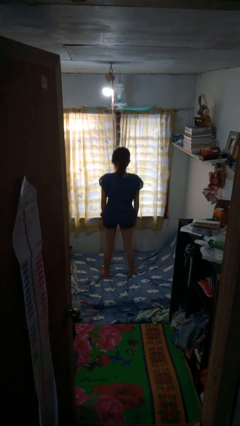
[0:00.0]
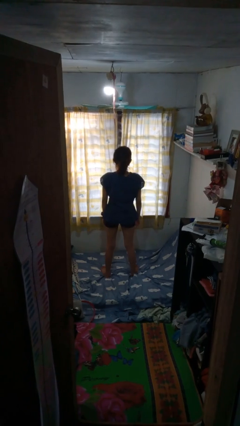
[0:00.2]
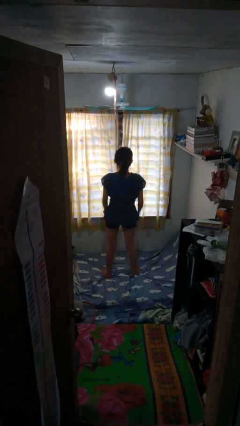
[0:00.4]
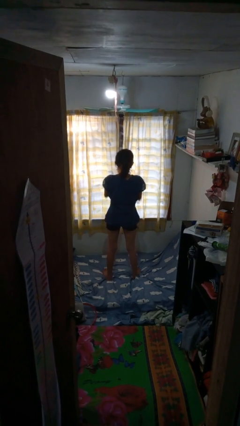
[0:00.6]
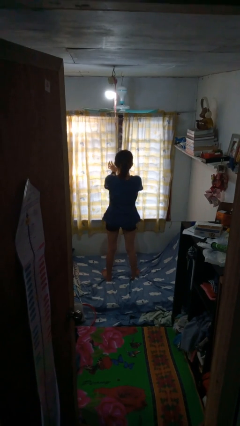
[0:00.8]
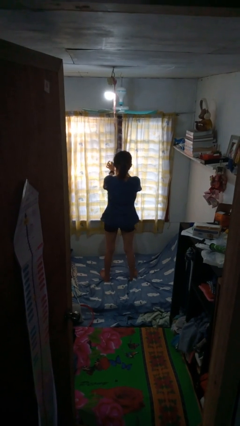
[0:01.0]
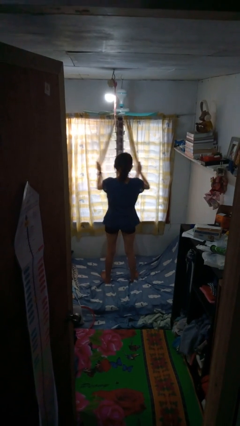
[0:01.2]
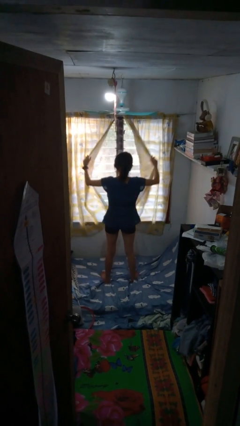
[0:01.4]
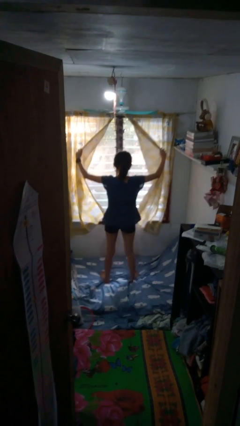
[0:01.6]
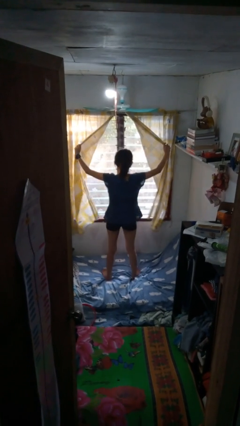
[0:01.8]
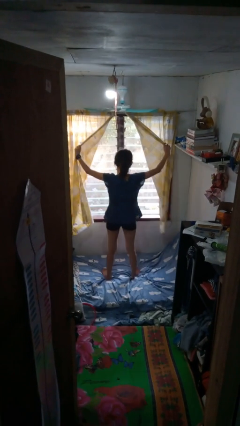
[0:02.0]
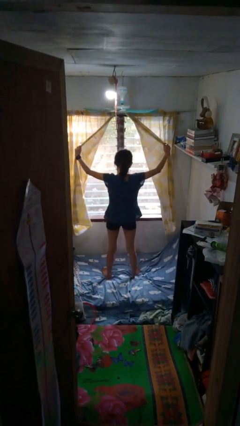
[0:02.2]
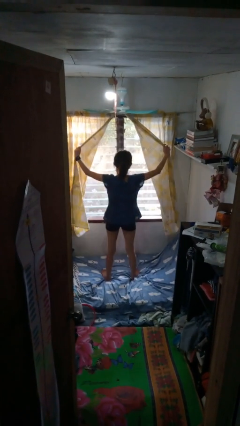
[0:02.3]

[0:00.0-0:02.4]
person opens curtains

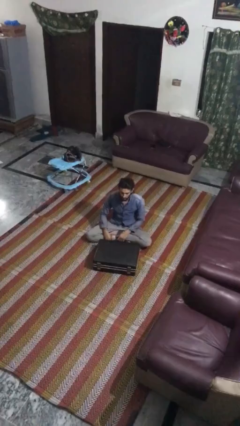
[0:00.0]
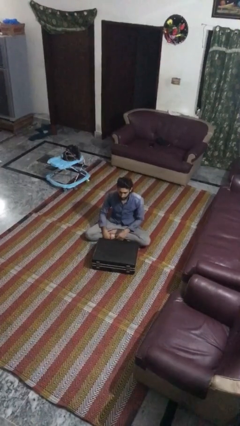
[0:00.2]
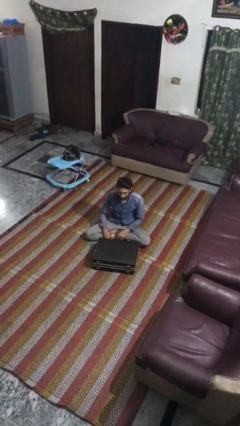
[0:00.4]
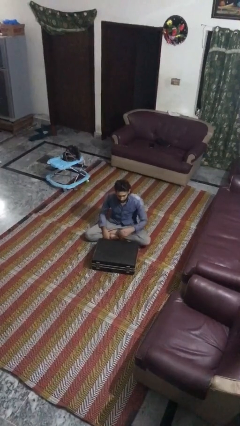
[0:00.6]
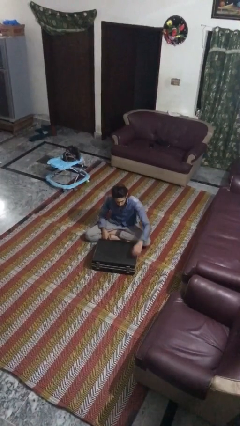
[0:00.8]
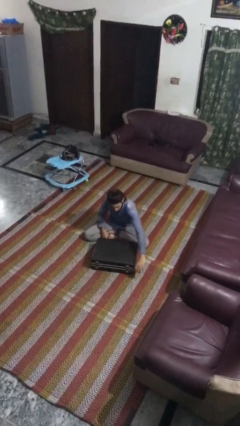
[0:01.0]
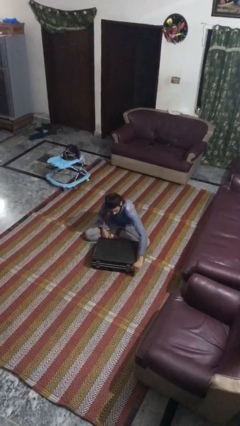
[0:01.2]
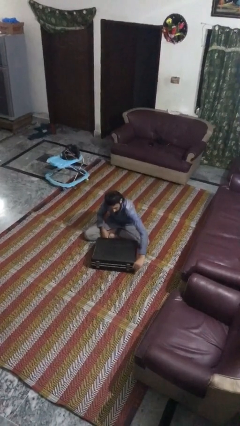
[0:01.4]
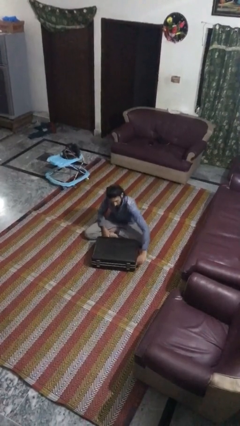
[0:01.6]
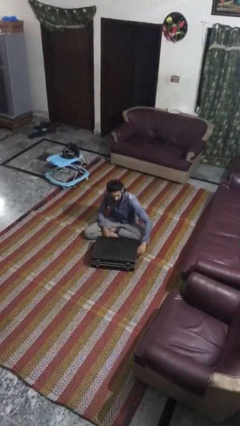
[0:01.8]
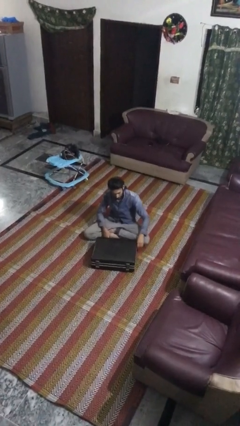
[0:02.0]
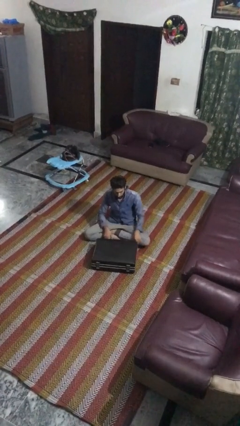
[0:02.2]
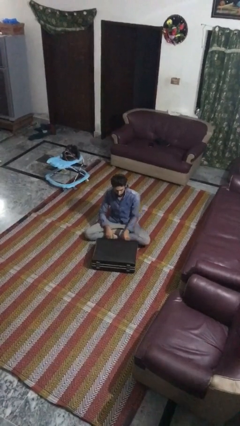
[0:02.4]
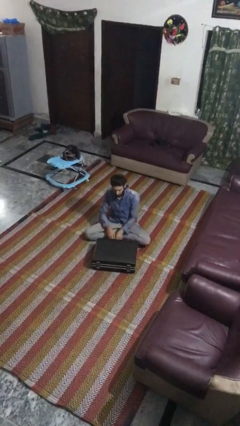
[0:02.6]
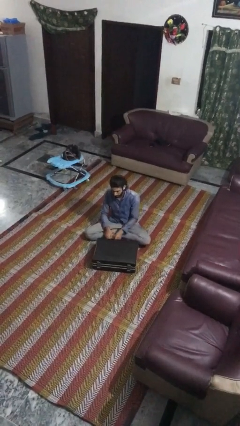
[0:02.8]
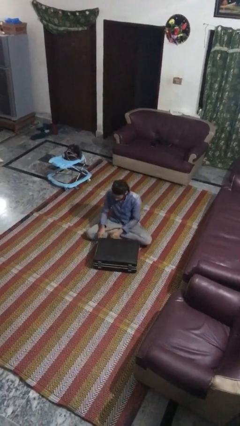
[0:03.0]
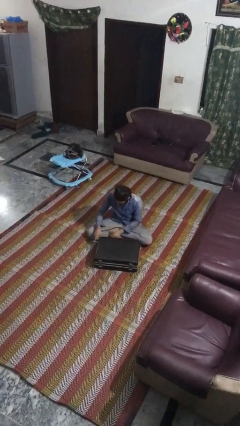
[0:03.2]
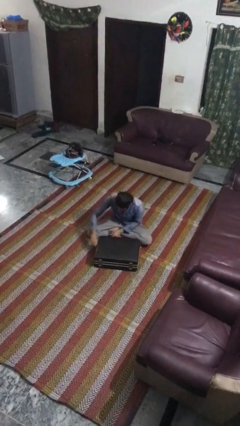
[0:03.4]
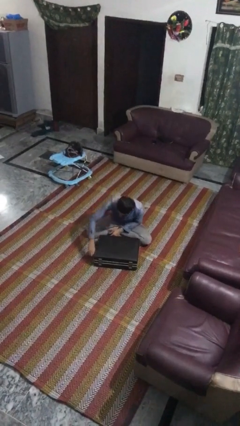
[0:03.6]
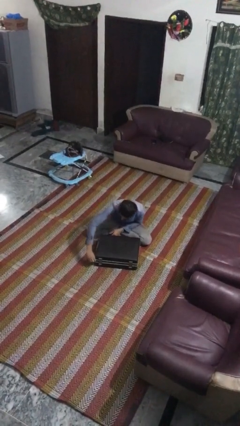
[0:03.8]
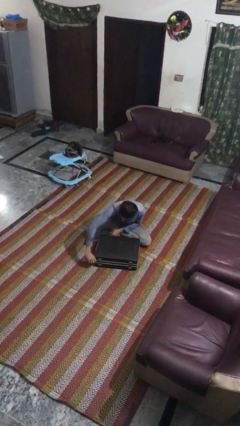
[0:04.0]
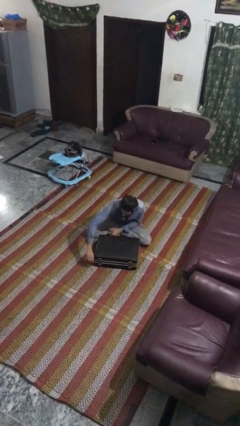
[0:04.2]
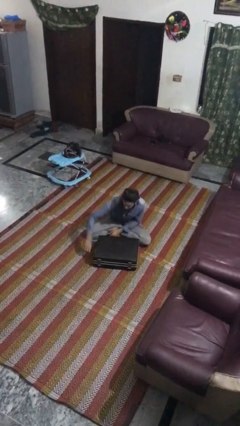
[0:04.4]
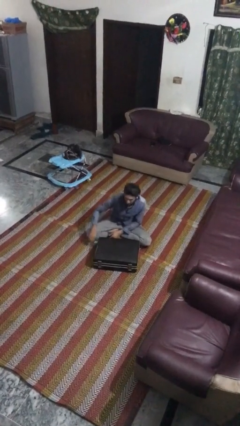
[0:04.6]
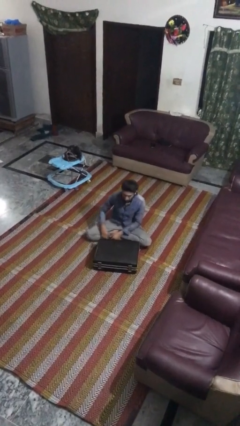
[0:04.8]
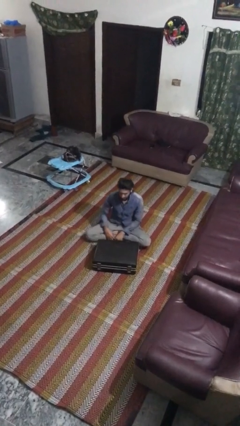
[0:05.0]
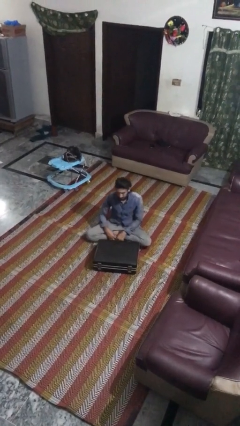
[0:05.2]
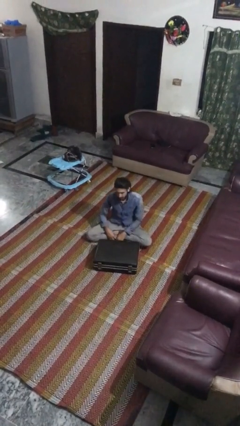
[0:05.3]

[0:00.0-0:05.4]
person closes suitcase

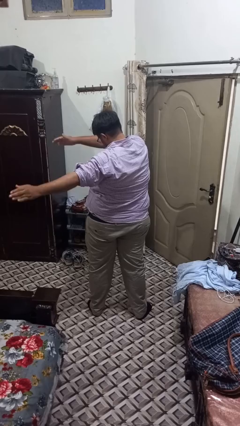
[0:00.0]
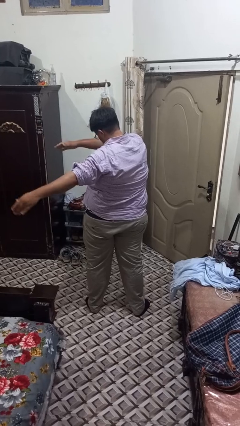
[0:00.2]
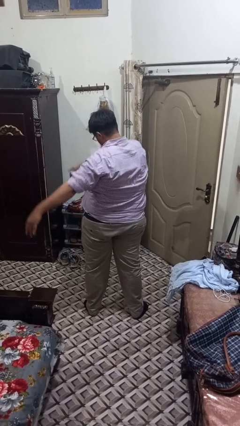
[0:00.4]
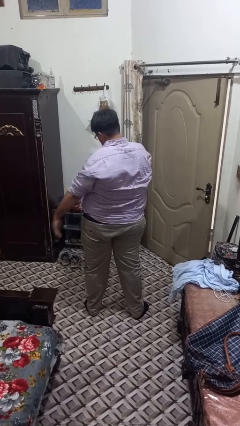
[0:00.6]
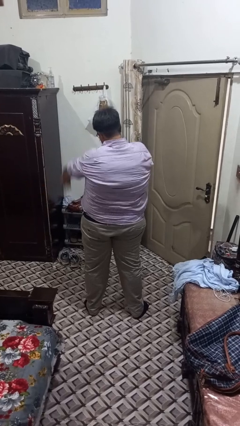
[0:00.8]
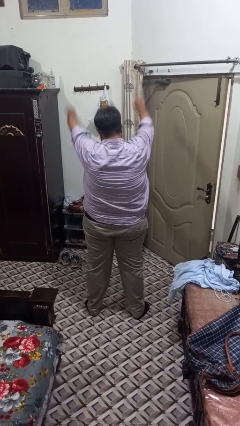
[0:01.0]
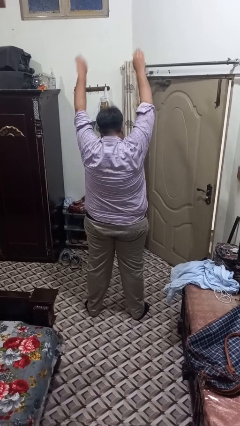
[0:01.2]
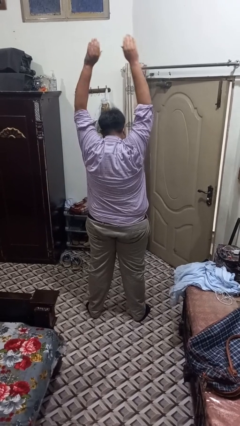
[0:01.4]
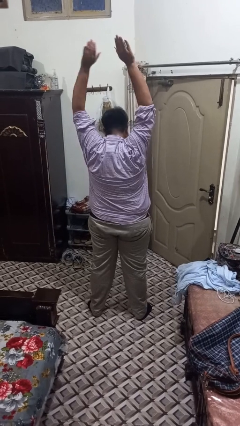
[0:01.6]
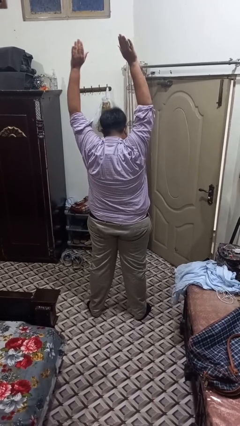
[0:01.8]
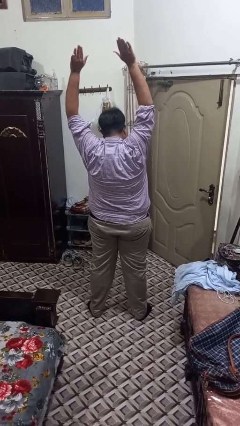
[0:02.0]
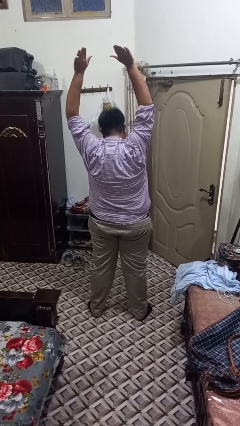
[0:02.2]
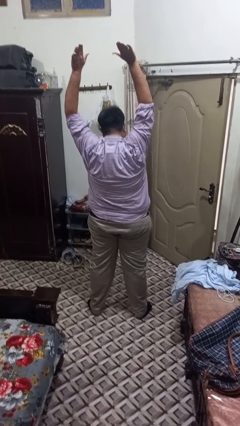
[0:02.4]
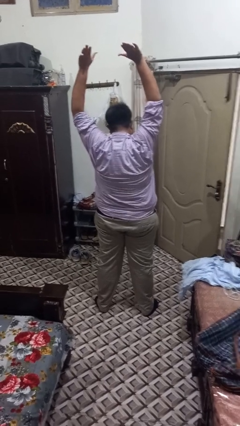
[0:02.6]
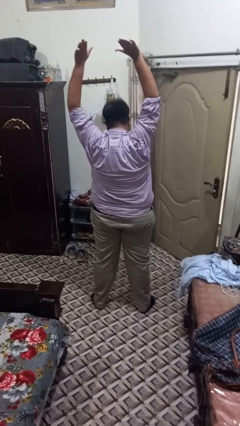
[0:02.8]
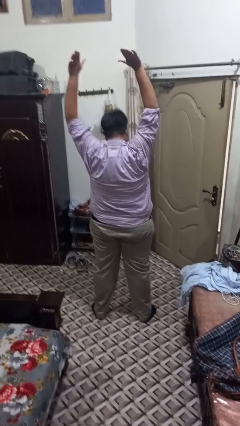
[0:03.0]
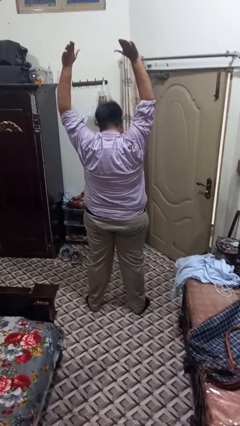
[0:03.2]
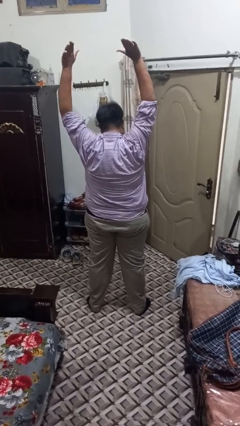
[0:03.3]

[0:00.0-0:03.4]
person stretches arms over head

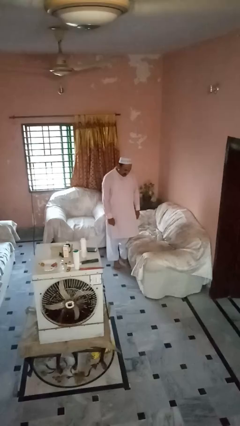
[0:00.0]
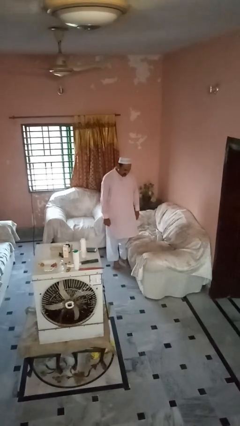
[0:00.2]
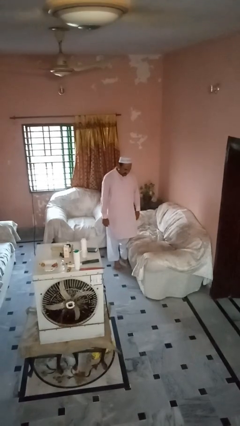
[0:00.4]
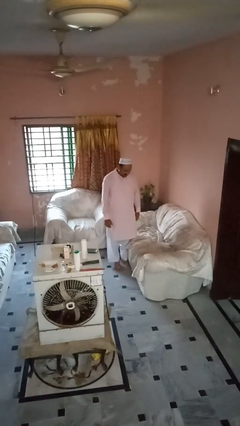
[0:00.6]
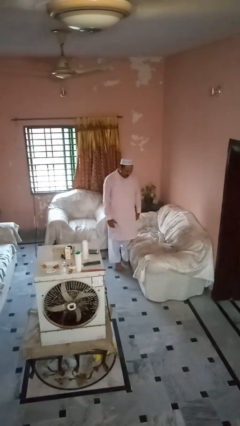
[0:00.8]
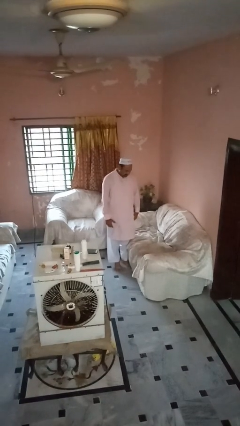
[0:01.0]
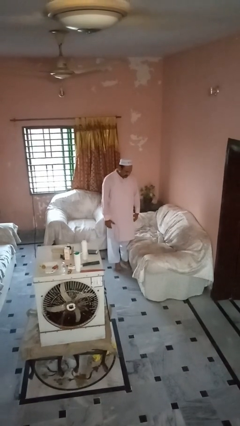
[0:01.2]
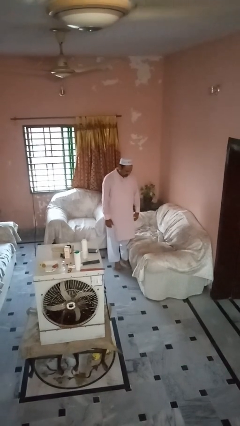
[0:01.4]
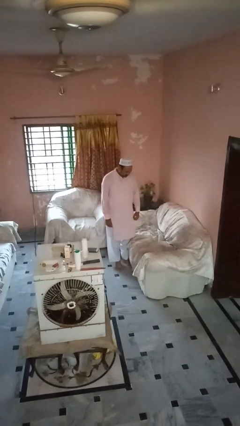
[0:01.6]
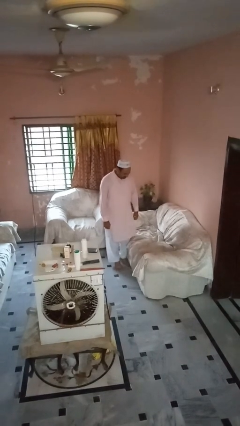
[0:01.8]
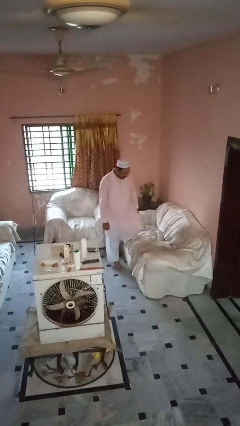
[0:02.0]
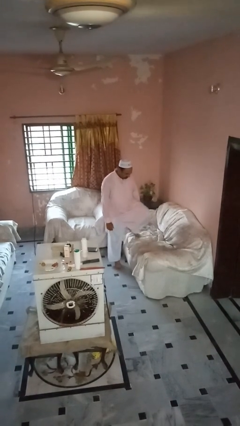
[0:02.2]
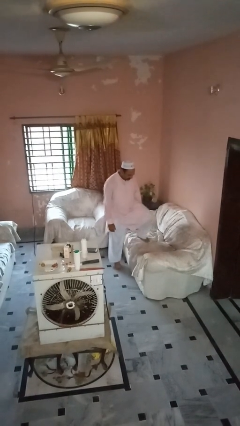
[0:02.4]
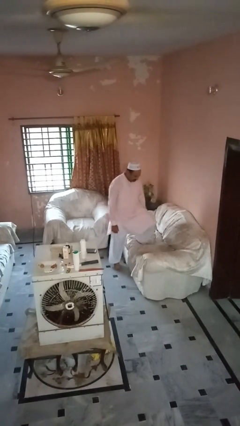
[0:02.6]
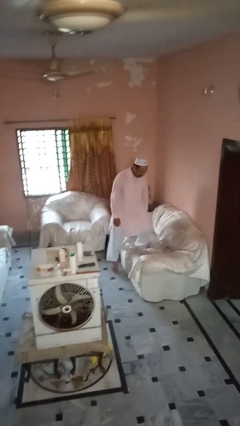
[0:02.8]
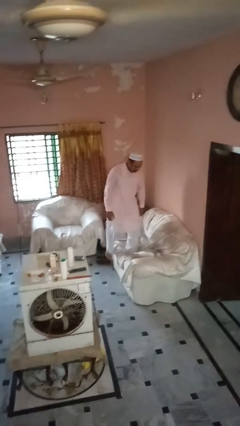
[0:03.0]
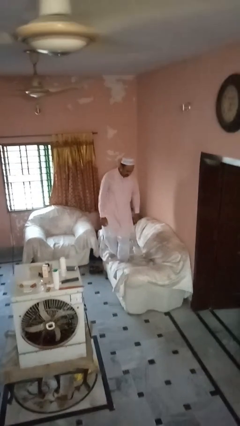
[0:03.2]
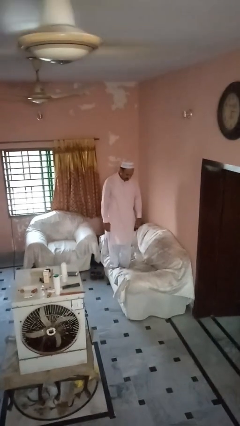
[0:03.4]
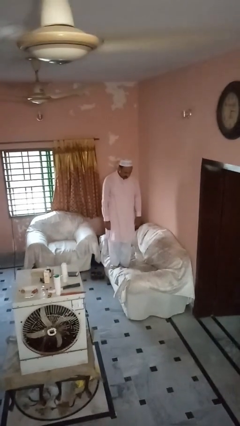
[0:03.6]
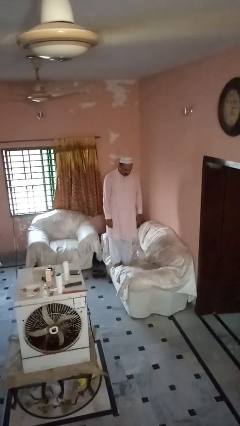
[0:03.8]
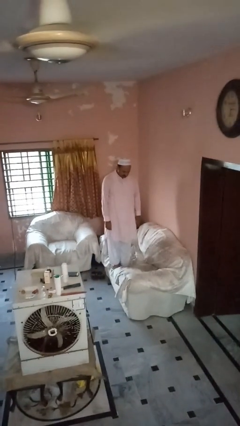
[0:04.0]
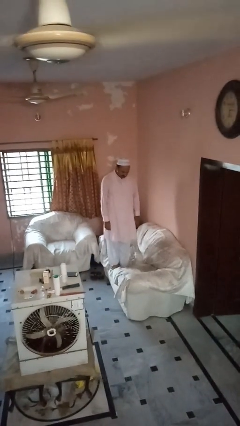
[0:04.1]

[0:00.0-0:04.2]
person climbs on couch

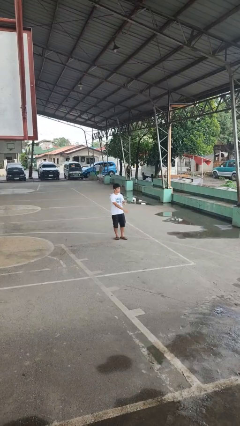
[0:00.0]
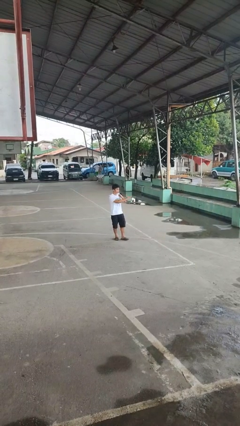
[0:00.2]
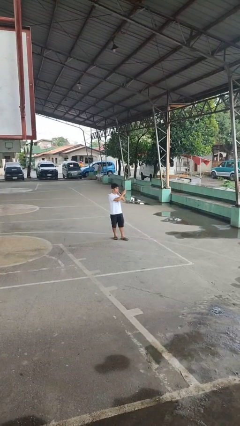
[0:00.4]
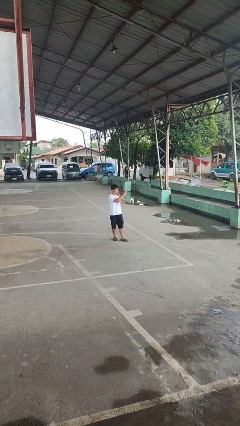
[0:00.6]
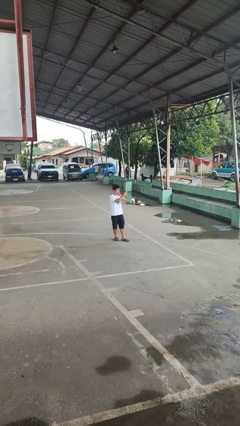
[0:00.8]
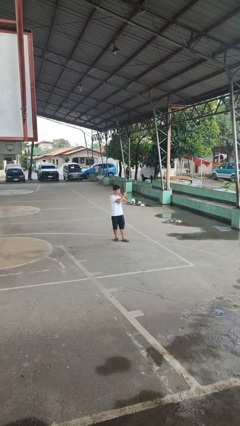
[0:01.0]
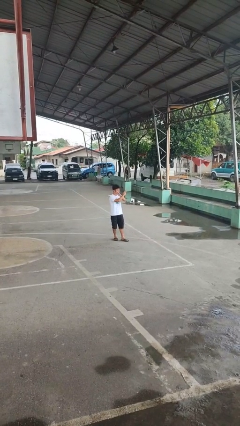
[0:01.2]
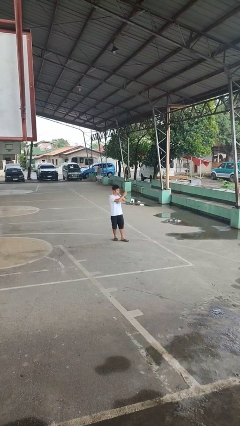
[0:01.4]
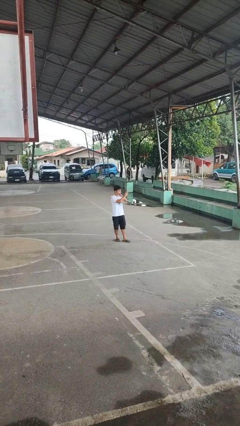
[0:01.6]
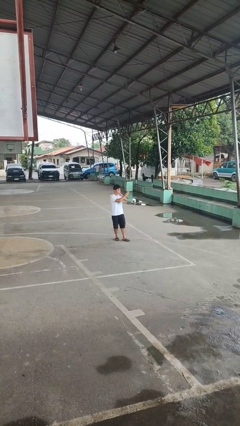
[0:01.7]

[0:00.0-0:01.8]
person gestures arms x

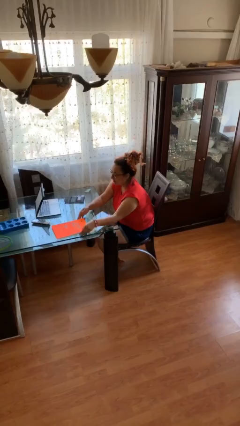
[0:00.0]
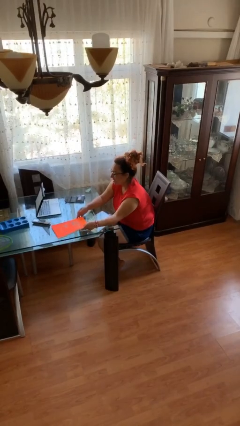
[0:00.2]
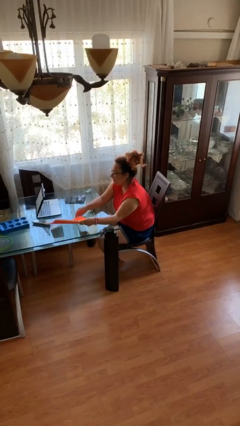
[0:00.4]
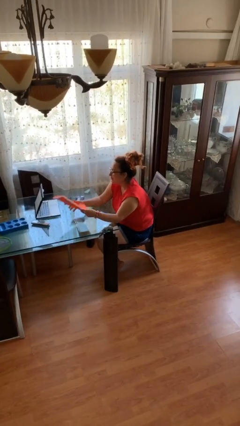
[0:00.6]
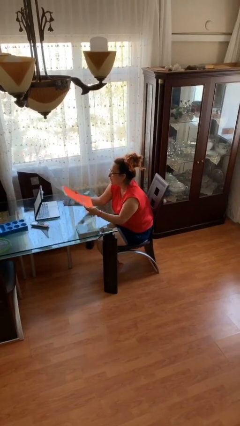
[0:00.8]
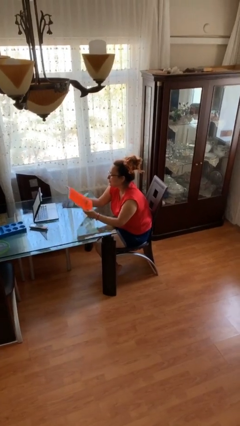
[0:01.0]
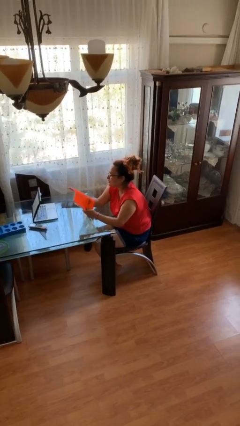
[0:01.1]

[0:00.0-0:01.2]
person picks up object from table
